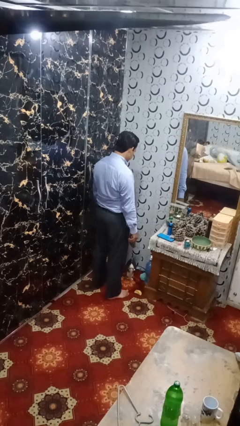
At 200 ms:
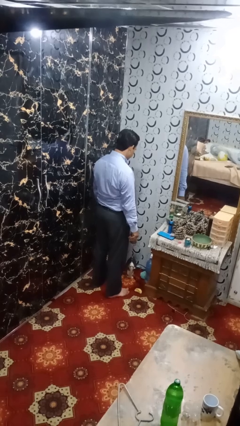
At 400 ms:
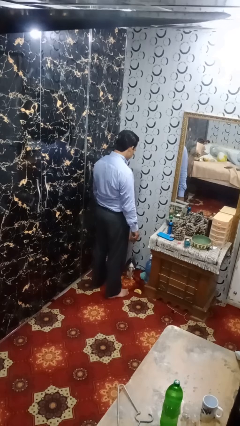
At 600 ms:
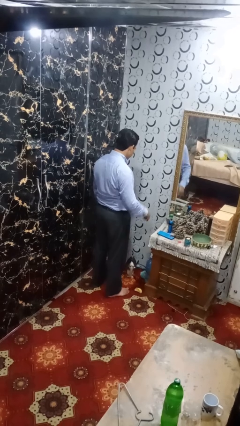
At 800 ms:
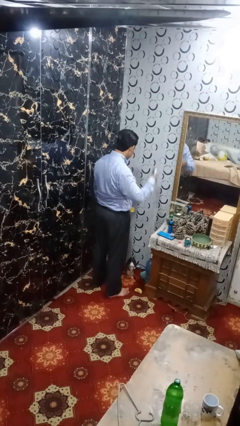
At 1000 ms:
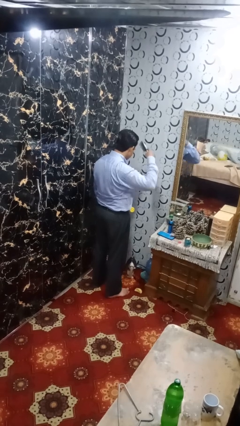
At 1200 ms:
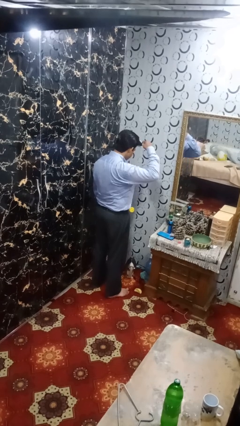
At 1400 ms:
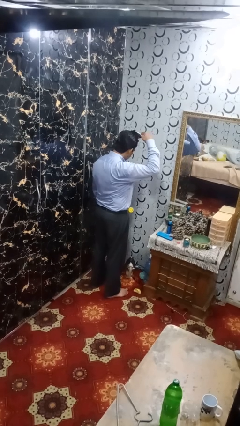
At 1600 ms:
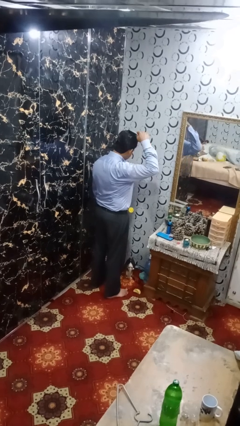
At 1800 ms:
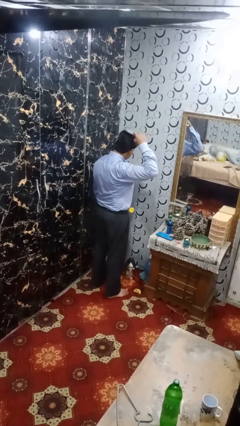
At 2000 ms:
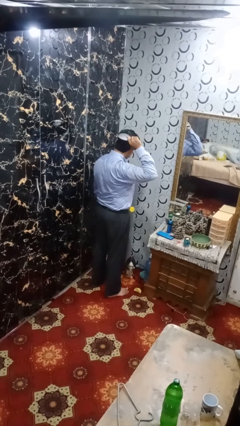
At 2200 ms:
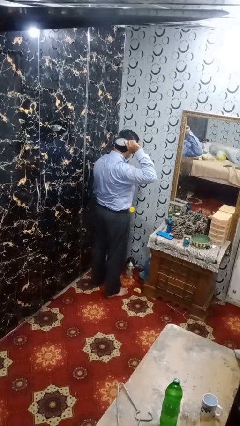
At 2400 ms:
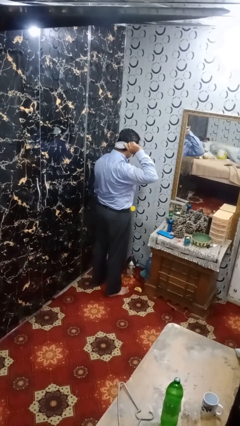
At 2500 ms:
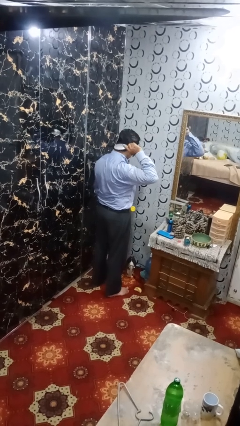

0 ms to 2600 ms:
person brushes hair

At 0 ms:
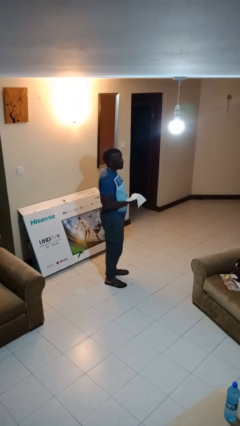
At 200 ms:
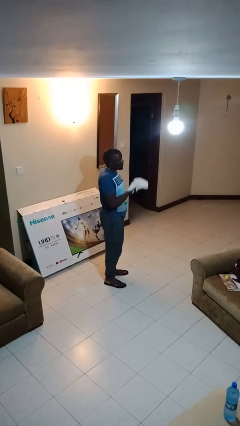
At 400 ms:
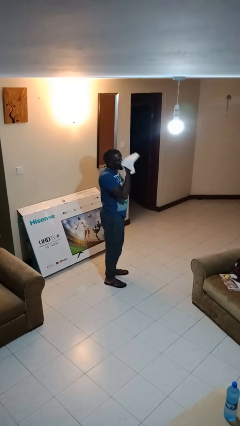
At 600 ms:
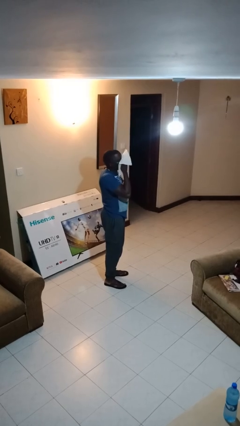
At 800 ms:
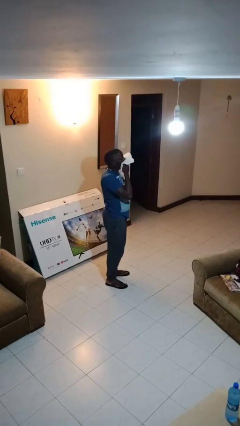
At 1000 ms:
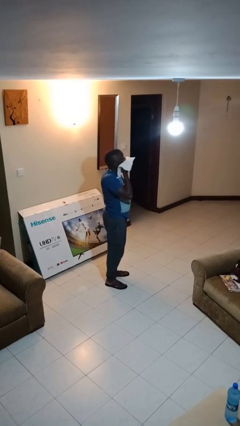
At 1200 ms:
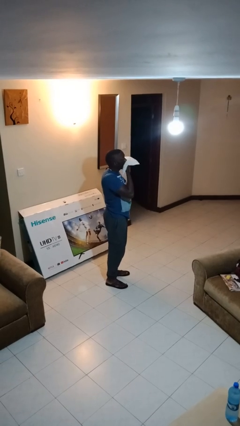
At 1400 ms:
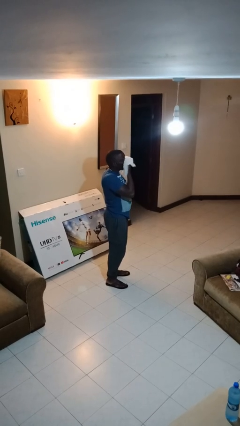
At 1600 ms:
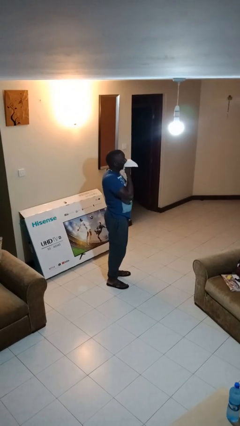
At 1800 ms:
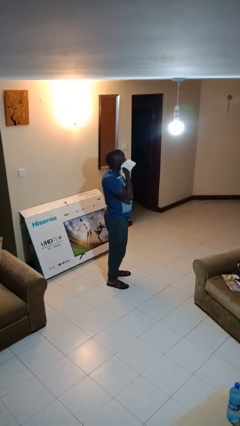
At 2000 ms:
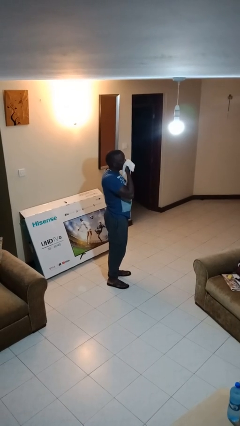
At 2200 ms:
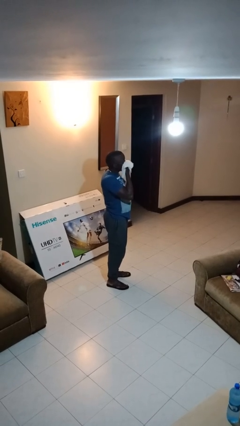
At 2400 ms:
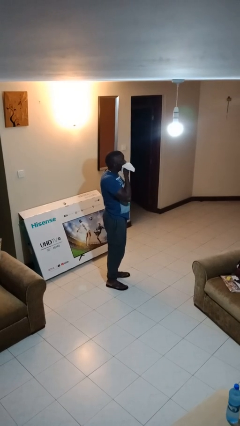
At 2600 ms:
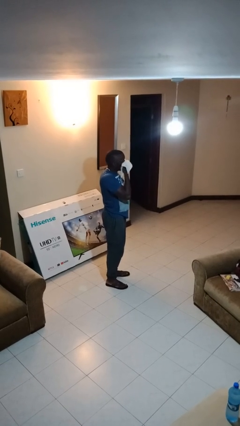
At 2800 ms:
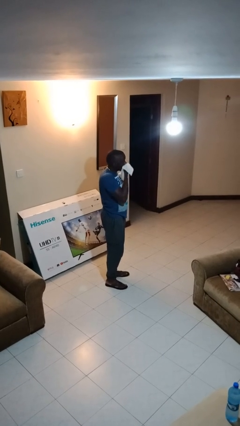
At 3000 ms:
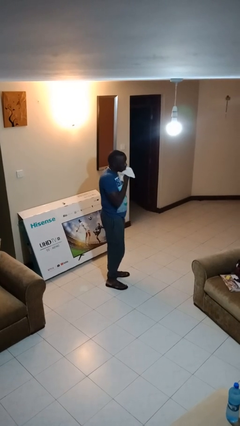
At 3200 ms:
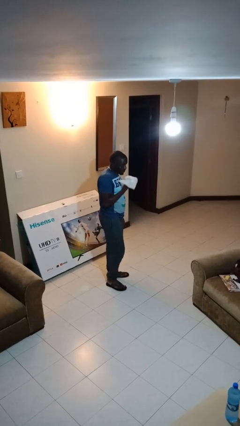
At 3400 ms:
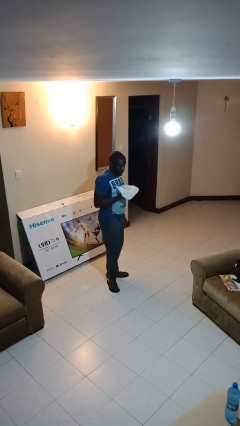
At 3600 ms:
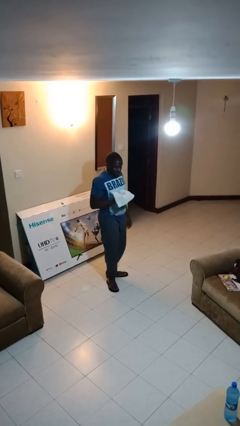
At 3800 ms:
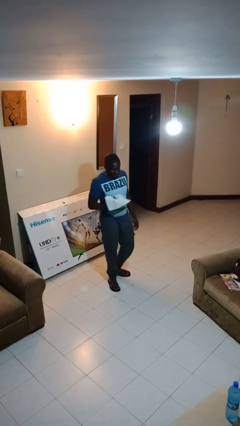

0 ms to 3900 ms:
person wipes mouth with napkin

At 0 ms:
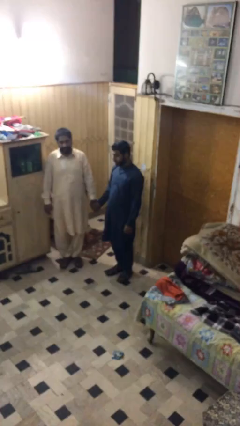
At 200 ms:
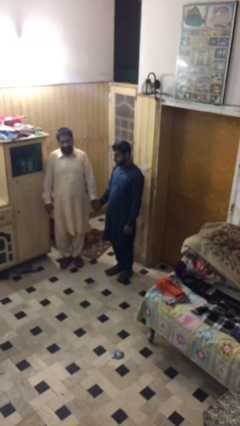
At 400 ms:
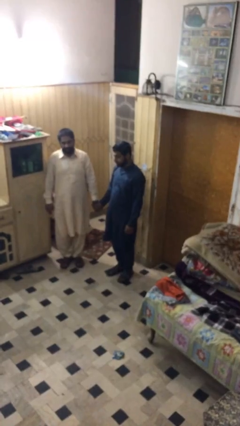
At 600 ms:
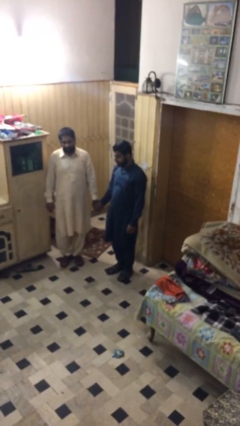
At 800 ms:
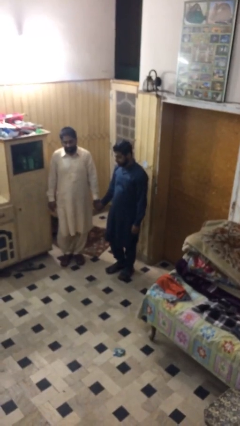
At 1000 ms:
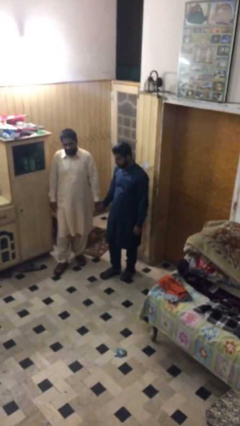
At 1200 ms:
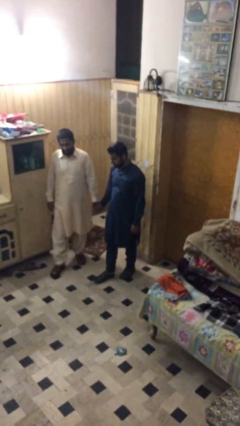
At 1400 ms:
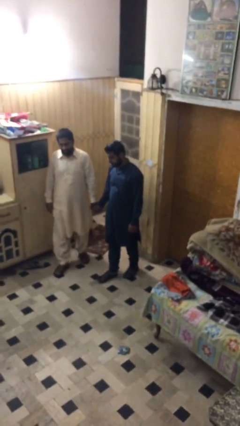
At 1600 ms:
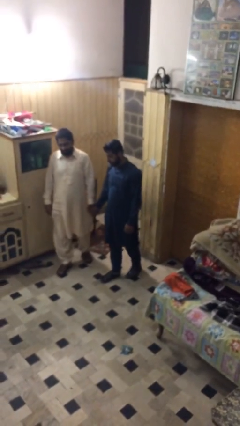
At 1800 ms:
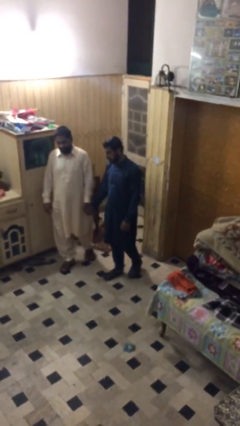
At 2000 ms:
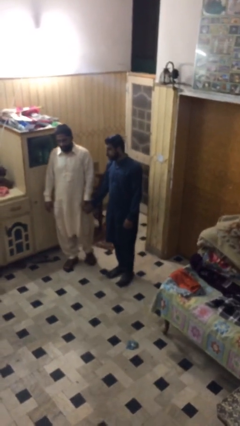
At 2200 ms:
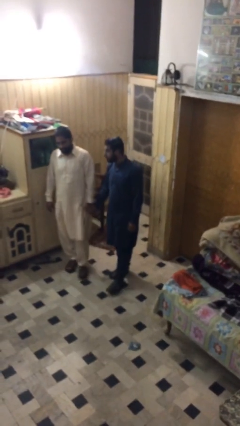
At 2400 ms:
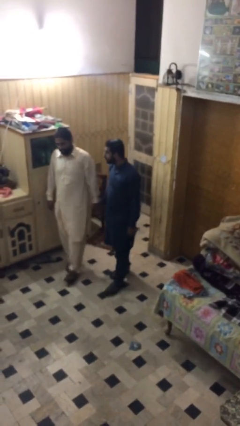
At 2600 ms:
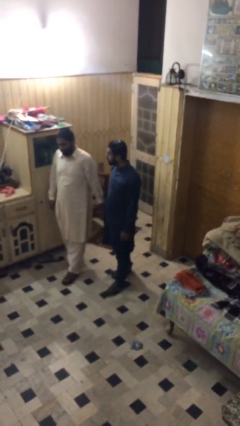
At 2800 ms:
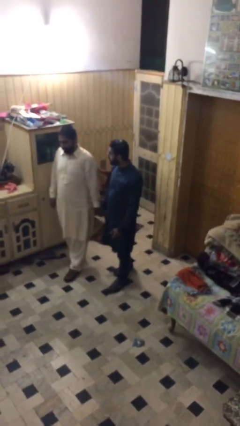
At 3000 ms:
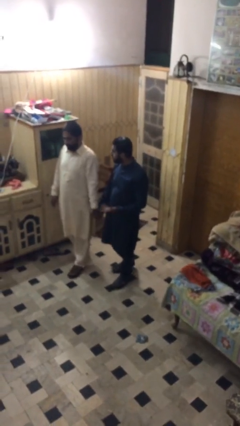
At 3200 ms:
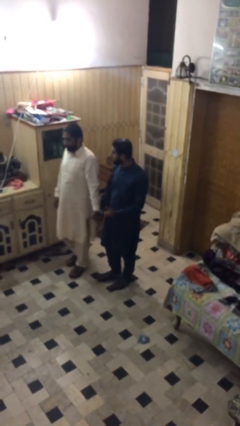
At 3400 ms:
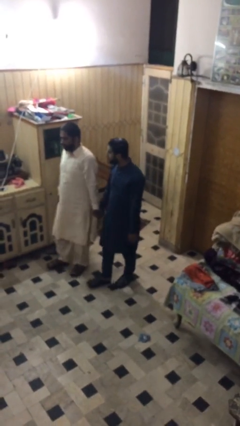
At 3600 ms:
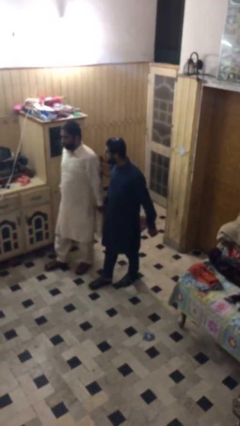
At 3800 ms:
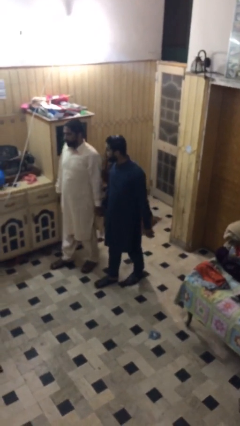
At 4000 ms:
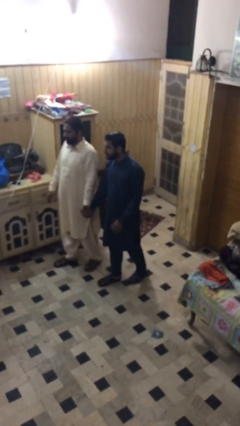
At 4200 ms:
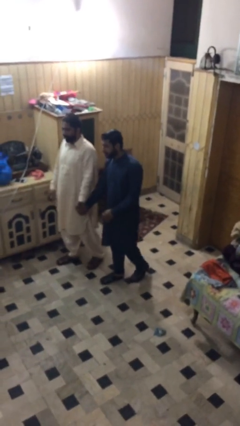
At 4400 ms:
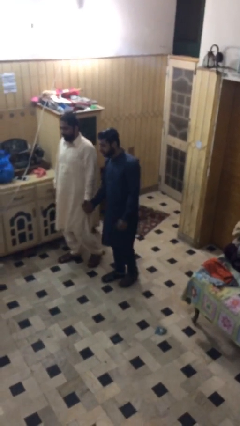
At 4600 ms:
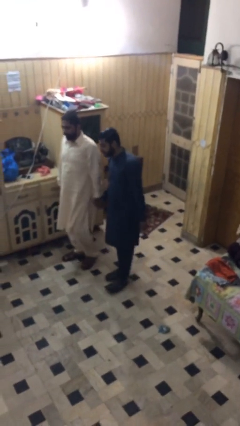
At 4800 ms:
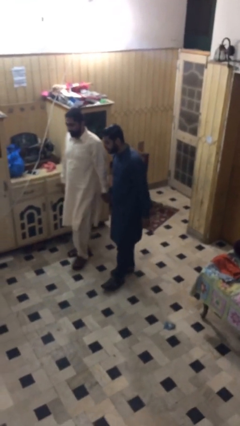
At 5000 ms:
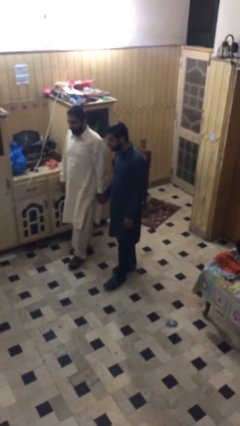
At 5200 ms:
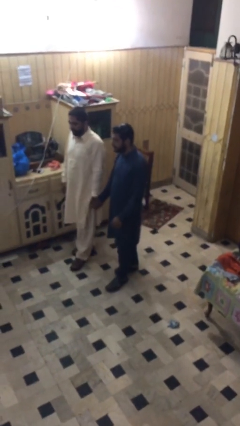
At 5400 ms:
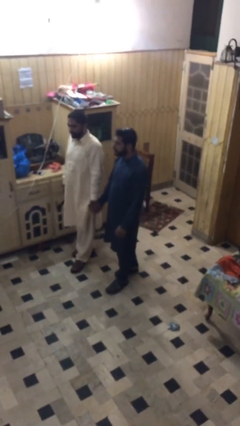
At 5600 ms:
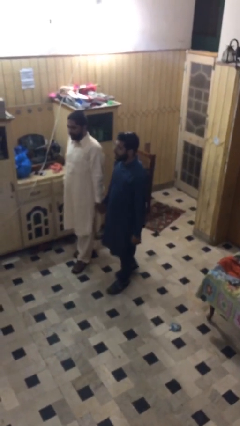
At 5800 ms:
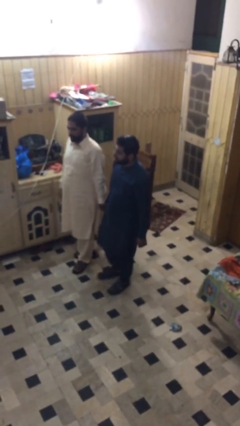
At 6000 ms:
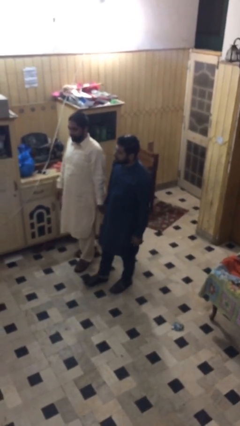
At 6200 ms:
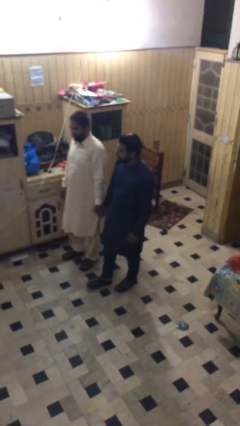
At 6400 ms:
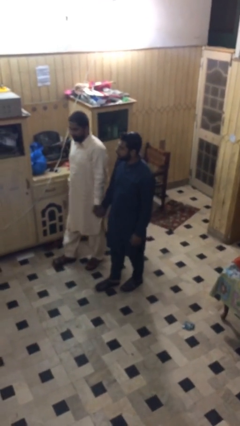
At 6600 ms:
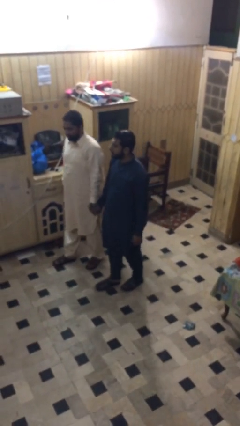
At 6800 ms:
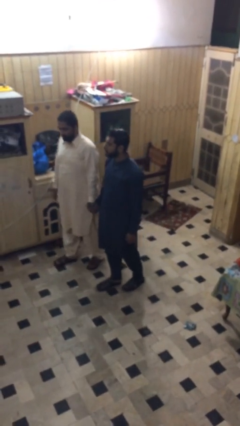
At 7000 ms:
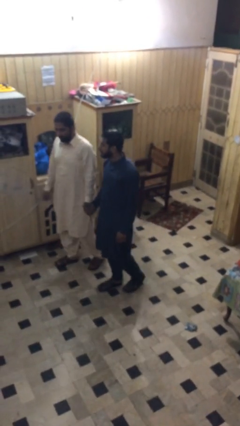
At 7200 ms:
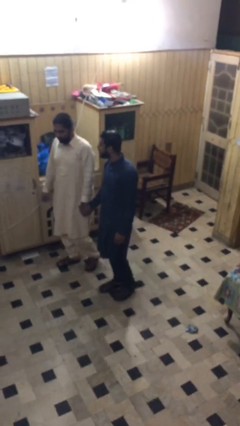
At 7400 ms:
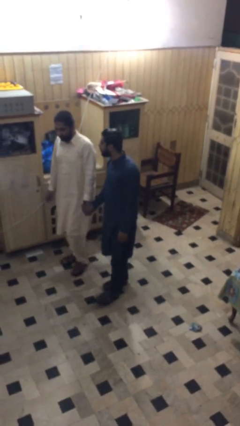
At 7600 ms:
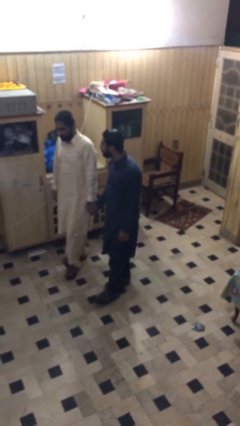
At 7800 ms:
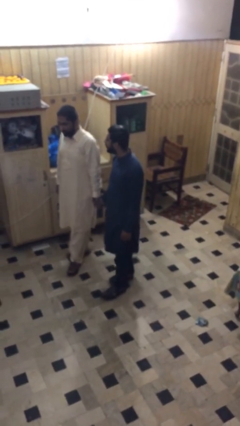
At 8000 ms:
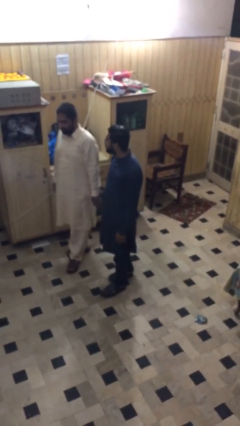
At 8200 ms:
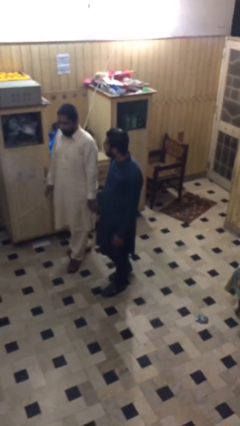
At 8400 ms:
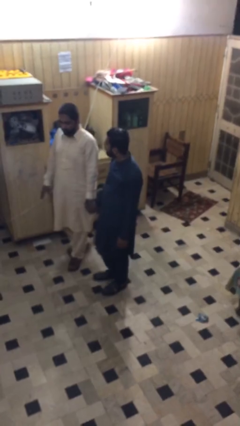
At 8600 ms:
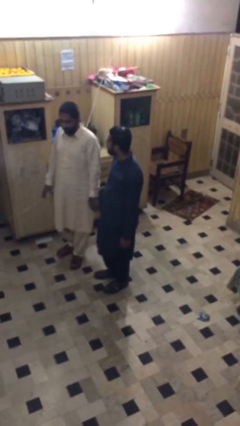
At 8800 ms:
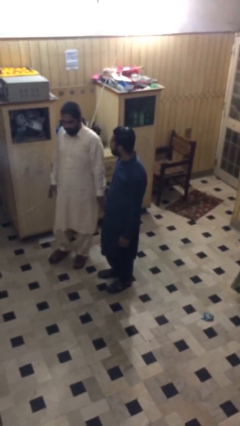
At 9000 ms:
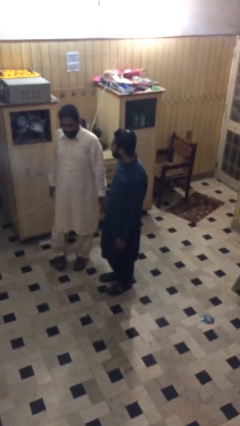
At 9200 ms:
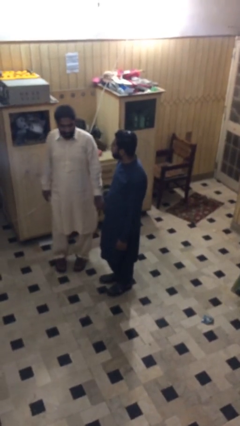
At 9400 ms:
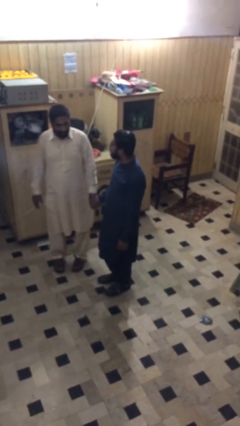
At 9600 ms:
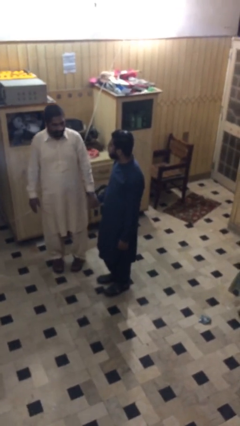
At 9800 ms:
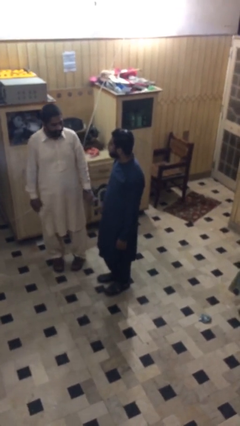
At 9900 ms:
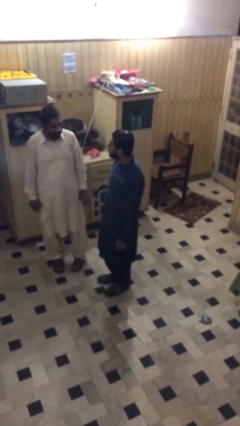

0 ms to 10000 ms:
person holds hand

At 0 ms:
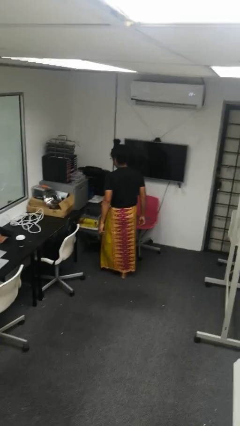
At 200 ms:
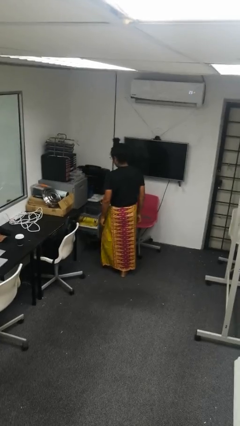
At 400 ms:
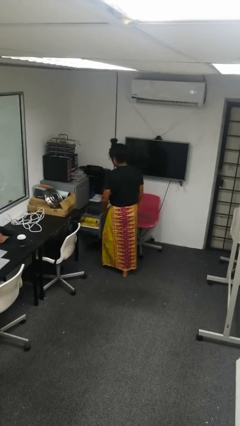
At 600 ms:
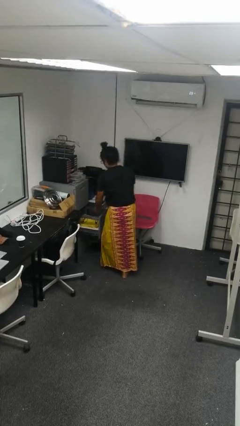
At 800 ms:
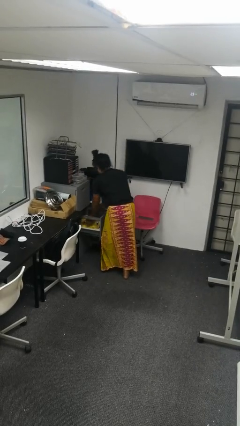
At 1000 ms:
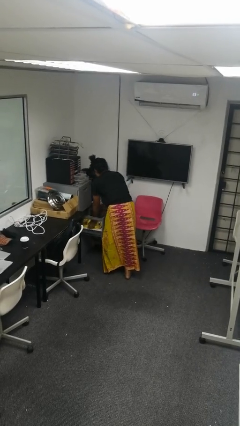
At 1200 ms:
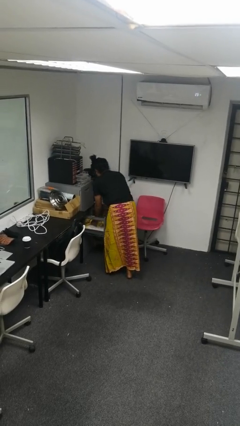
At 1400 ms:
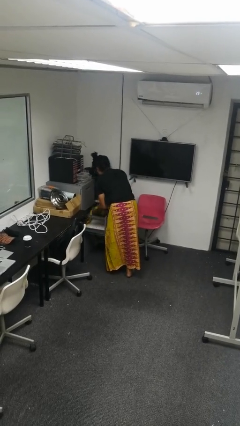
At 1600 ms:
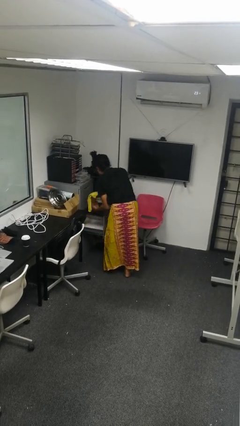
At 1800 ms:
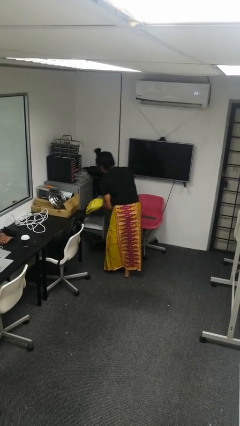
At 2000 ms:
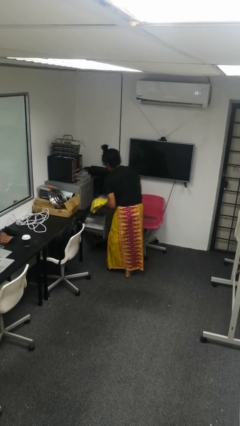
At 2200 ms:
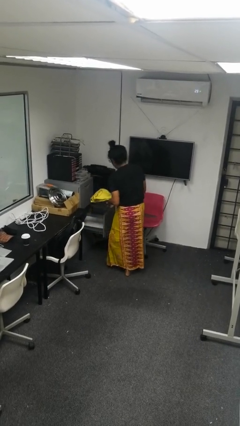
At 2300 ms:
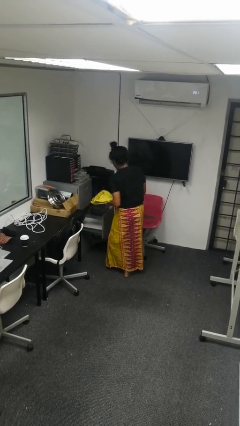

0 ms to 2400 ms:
person takes clothes from dresser
